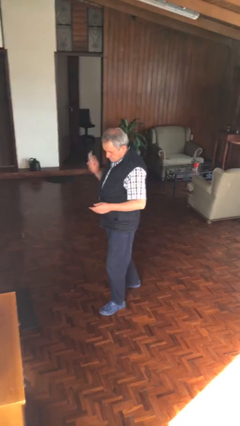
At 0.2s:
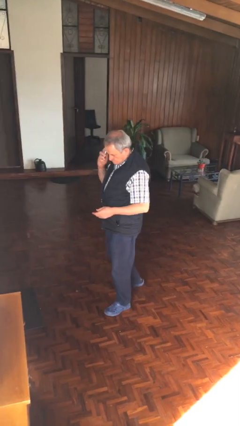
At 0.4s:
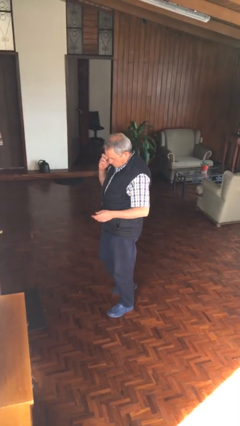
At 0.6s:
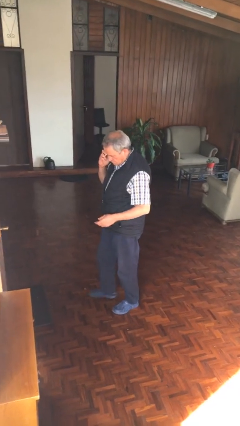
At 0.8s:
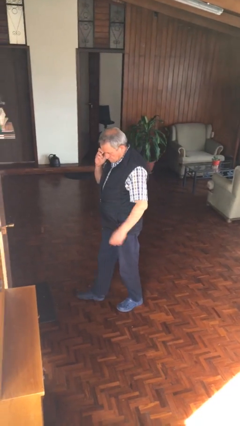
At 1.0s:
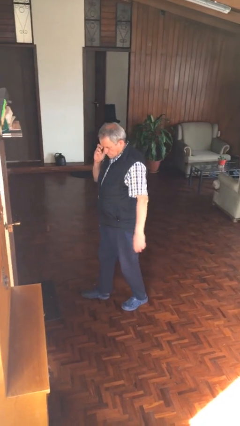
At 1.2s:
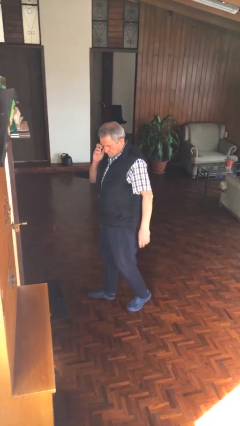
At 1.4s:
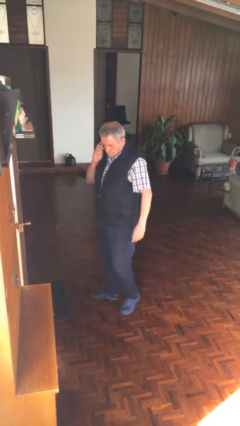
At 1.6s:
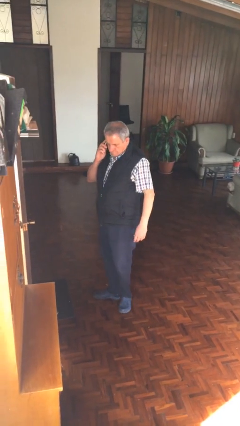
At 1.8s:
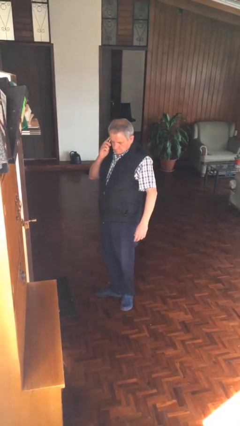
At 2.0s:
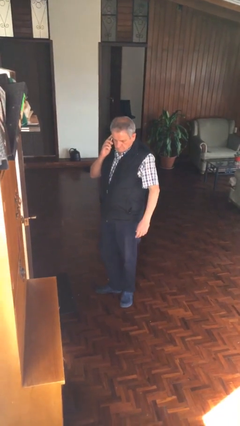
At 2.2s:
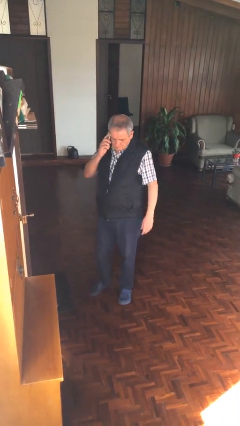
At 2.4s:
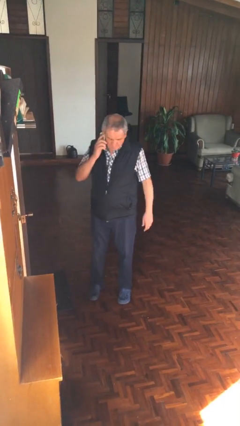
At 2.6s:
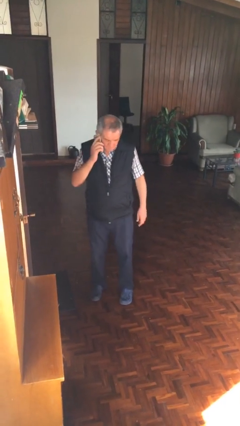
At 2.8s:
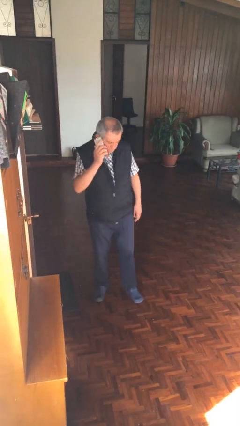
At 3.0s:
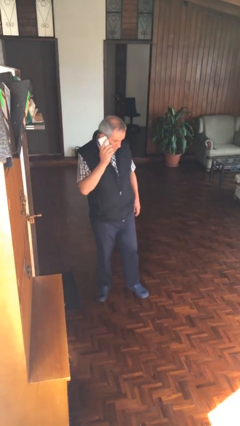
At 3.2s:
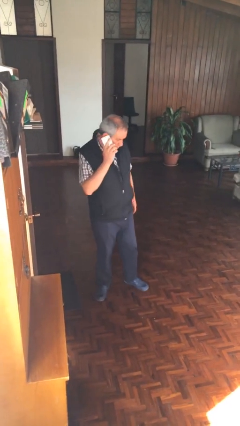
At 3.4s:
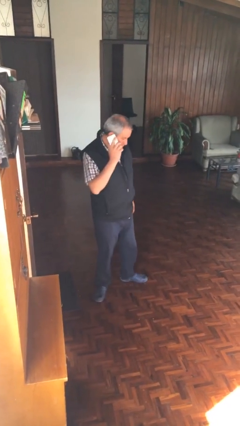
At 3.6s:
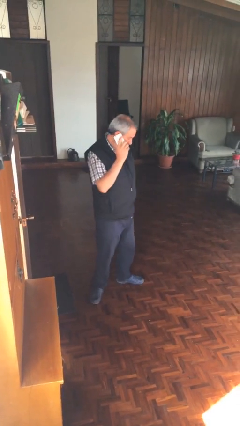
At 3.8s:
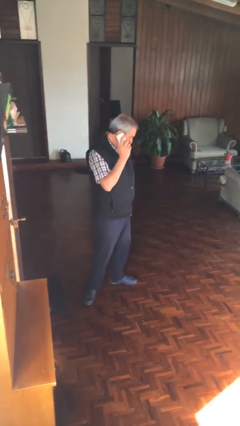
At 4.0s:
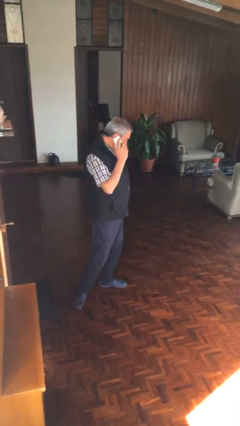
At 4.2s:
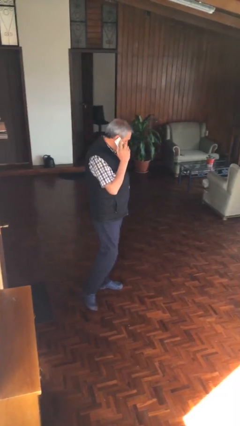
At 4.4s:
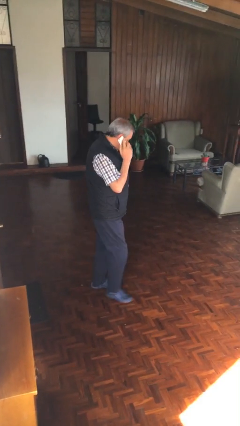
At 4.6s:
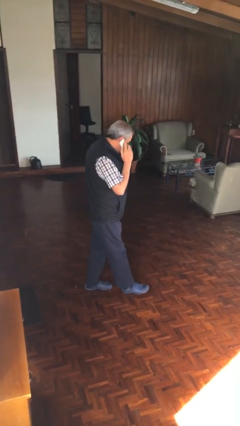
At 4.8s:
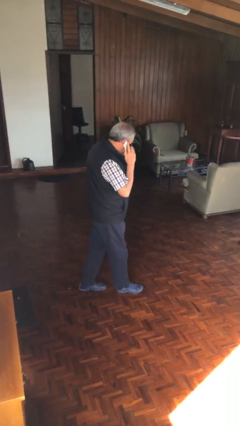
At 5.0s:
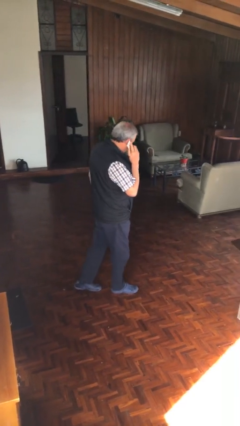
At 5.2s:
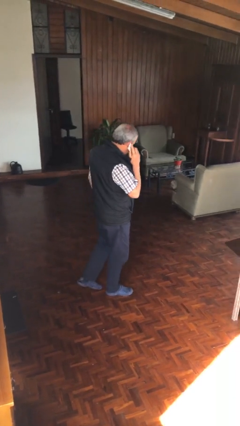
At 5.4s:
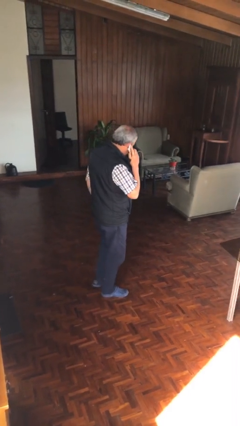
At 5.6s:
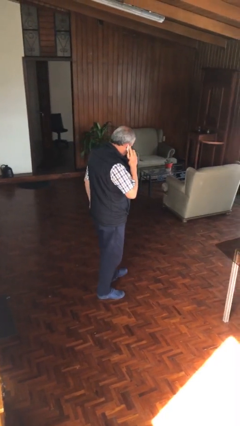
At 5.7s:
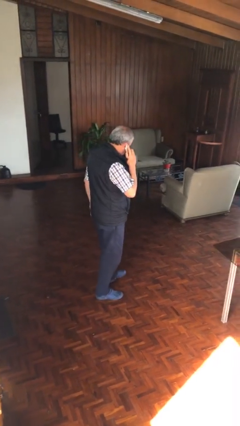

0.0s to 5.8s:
person talks on phone

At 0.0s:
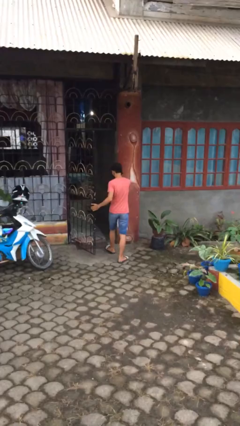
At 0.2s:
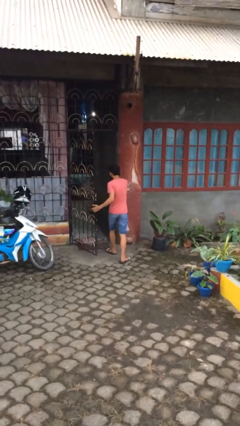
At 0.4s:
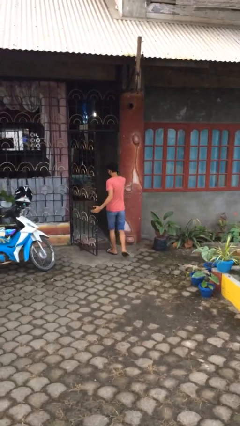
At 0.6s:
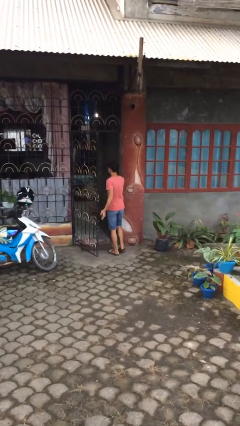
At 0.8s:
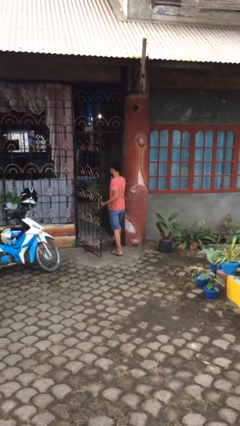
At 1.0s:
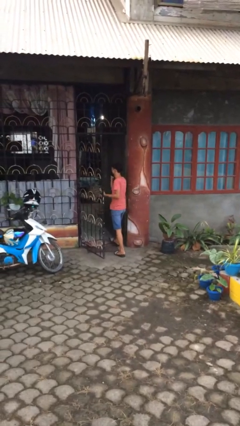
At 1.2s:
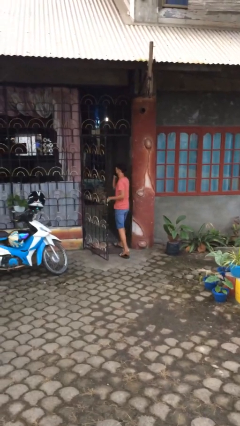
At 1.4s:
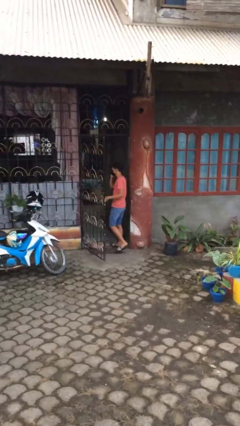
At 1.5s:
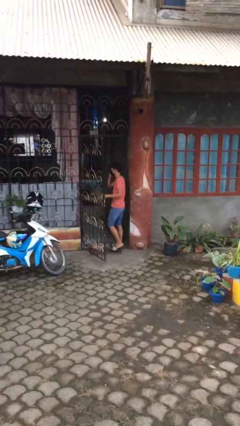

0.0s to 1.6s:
person exits scene through structure

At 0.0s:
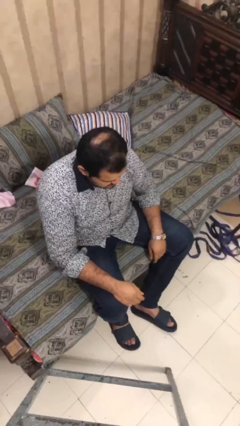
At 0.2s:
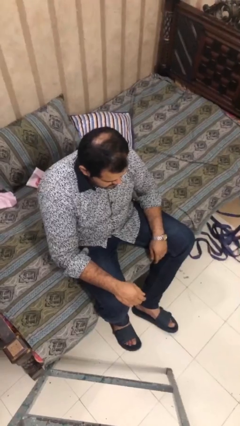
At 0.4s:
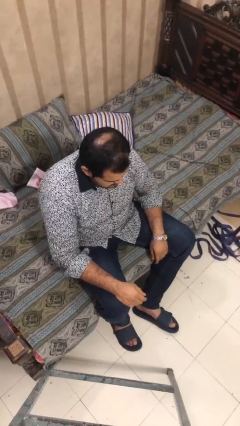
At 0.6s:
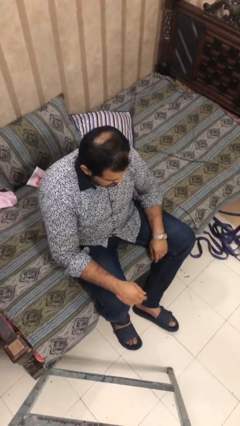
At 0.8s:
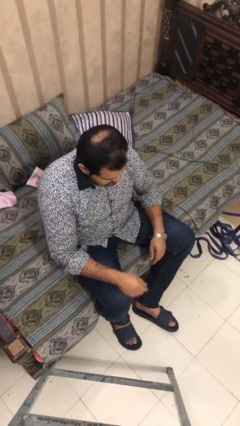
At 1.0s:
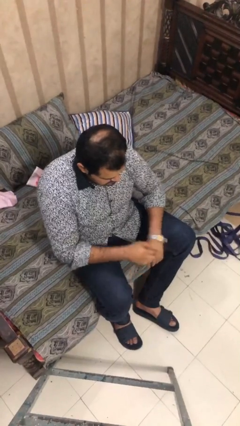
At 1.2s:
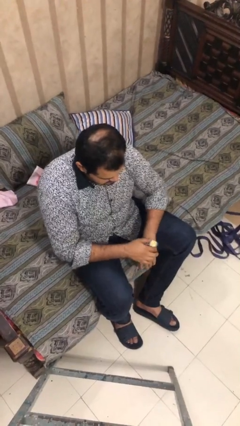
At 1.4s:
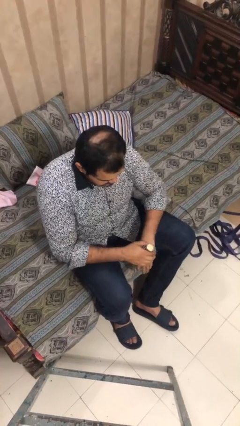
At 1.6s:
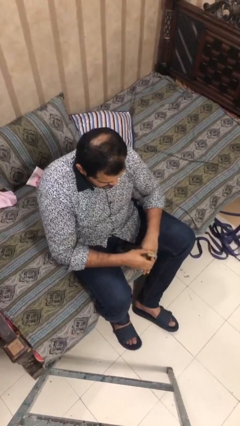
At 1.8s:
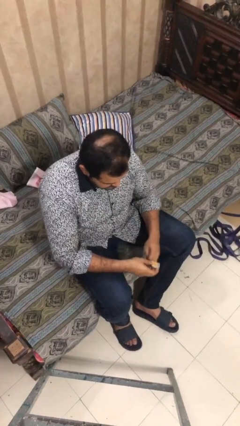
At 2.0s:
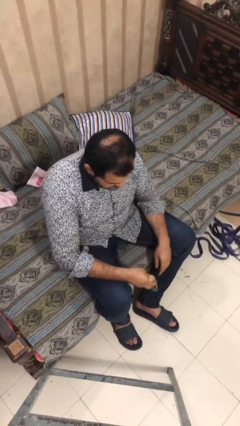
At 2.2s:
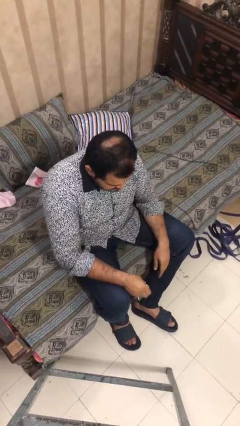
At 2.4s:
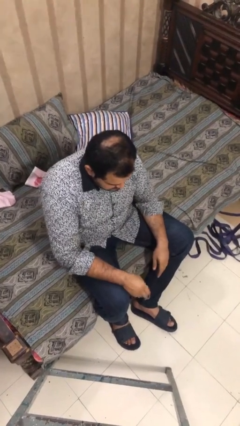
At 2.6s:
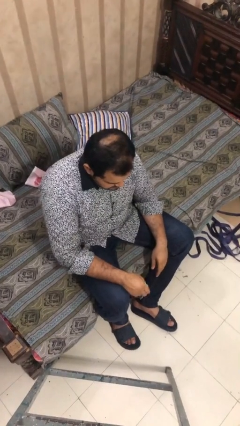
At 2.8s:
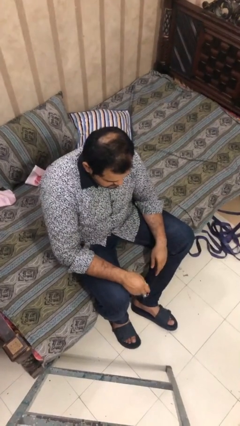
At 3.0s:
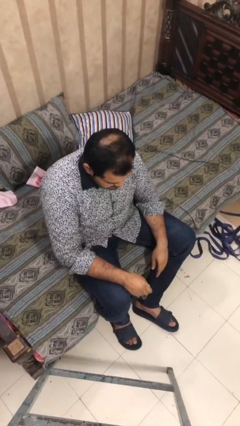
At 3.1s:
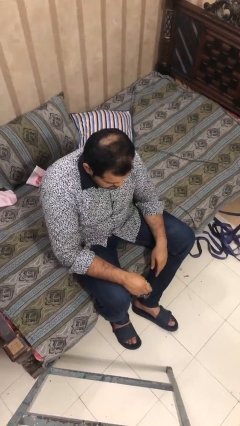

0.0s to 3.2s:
person takes off wristwatch

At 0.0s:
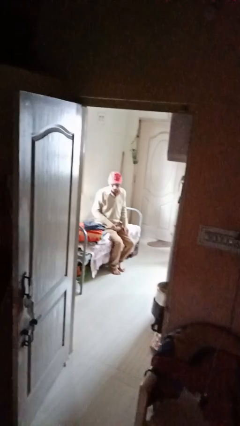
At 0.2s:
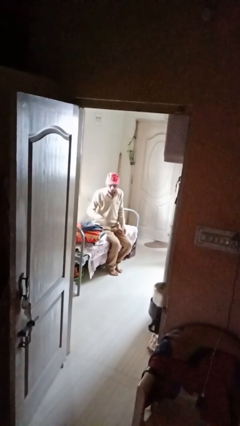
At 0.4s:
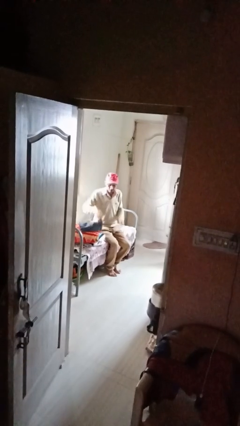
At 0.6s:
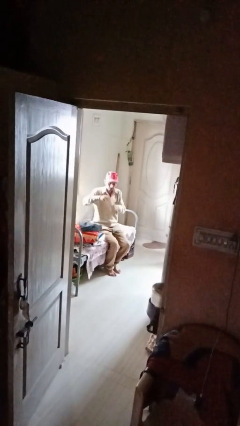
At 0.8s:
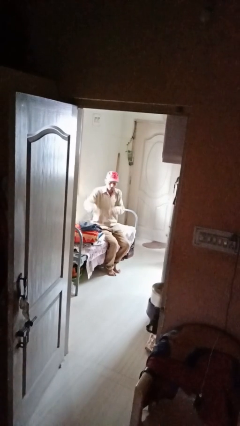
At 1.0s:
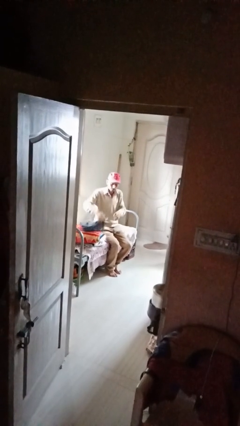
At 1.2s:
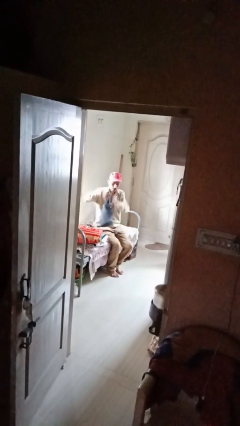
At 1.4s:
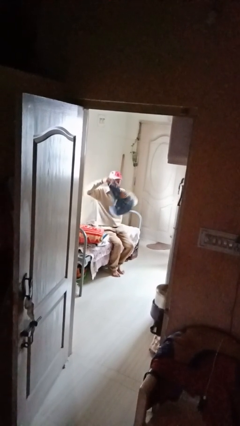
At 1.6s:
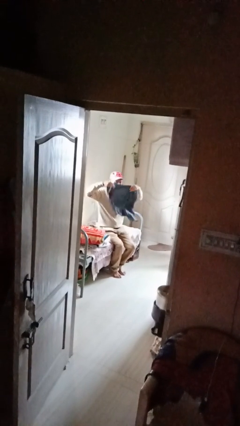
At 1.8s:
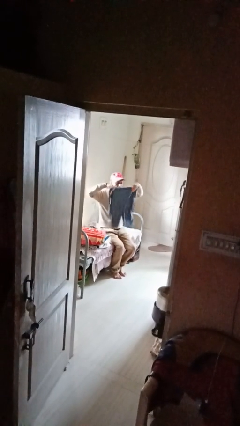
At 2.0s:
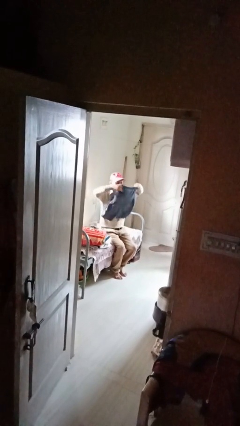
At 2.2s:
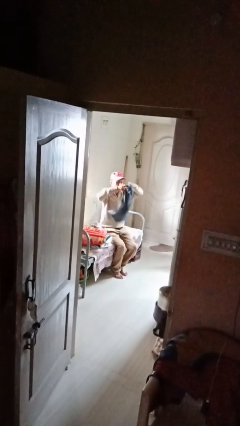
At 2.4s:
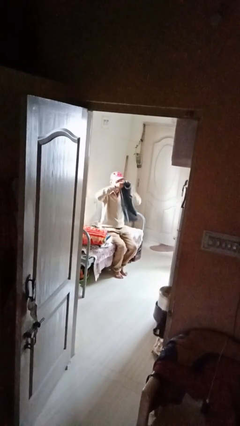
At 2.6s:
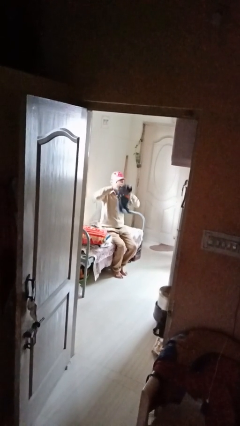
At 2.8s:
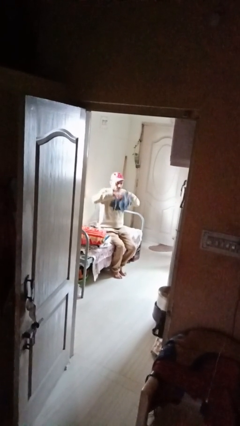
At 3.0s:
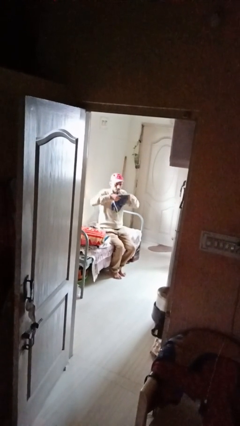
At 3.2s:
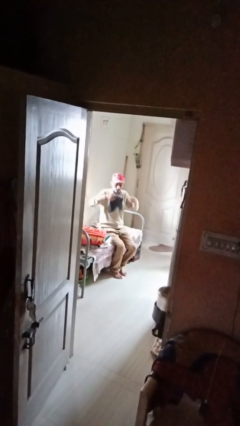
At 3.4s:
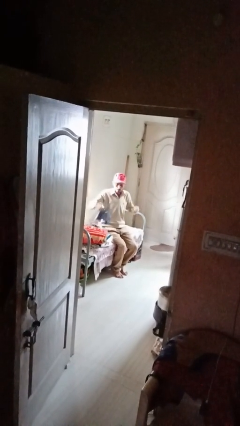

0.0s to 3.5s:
person folds pants

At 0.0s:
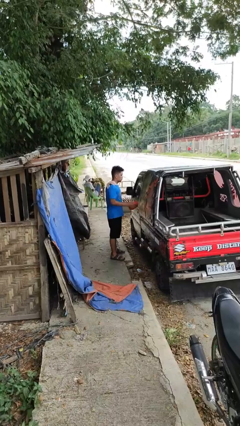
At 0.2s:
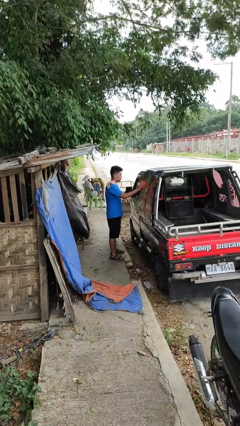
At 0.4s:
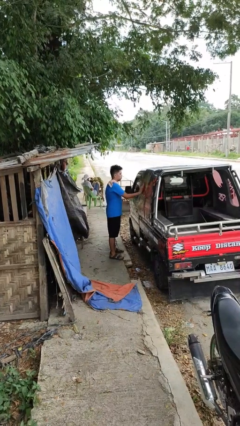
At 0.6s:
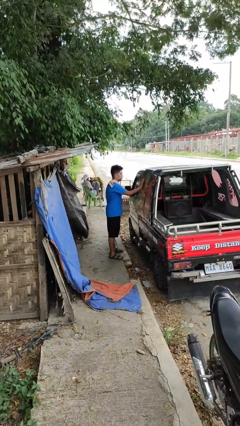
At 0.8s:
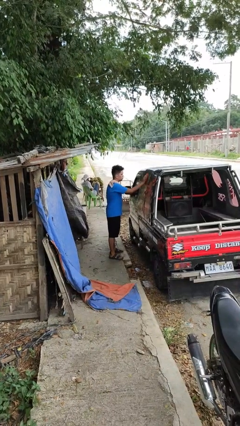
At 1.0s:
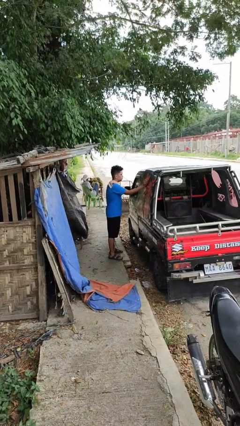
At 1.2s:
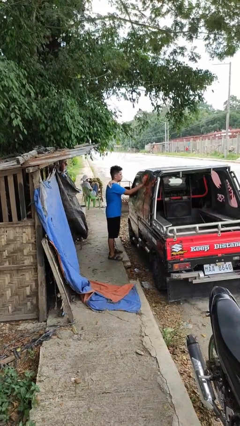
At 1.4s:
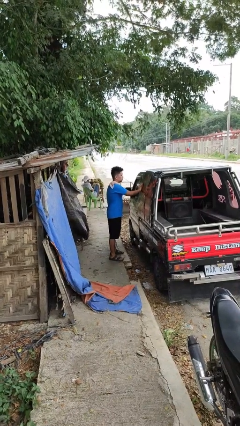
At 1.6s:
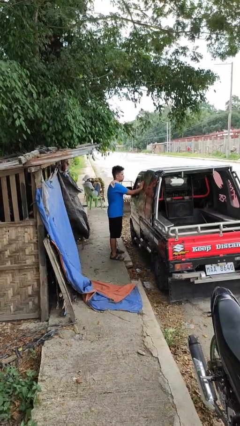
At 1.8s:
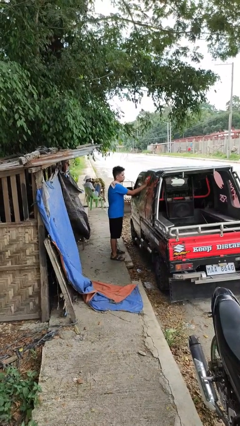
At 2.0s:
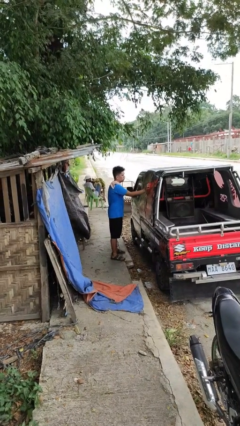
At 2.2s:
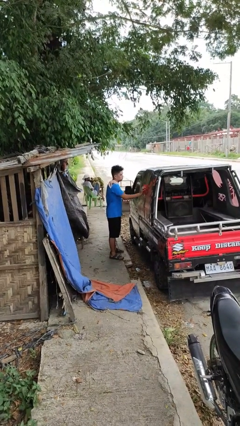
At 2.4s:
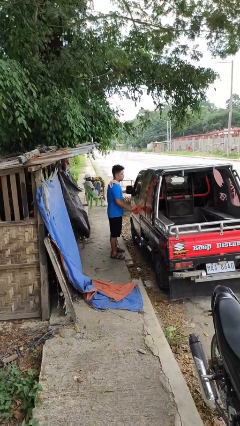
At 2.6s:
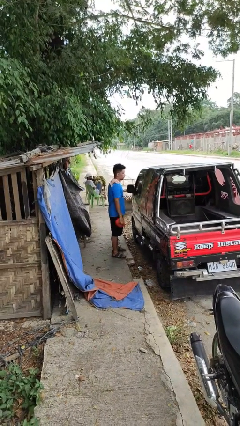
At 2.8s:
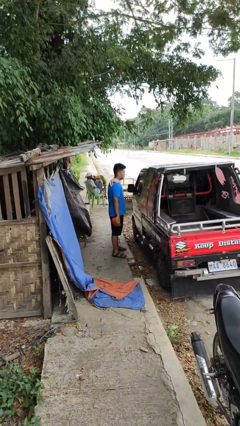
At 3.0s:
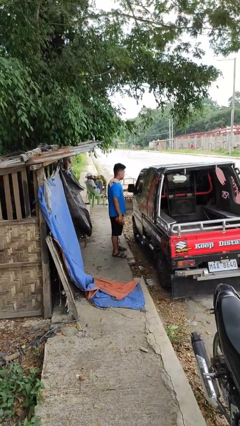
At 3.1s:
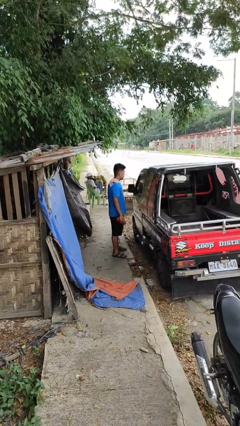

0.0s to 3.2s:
person polishes car with rag

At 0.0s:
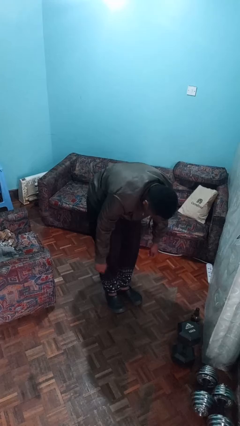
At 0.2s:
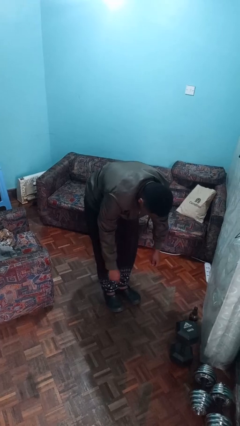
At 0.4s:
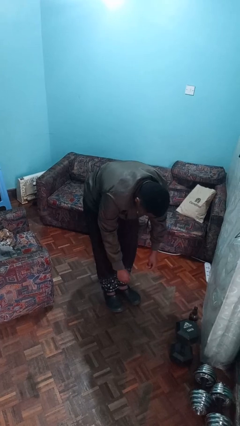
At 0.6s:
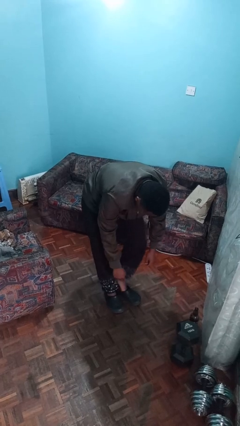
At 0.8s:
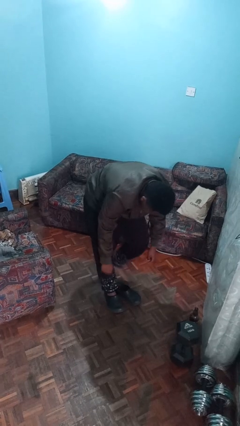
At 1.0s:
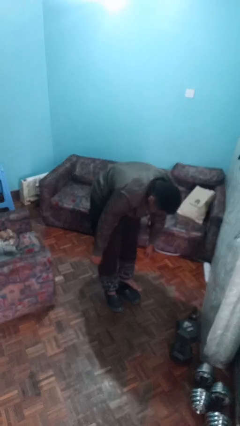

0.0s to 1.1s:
person takes off shoes
